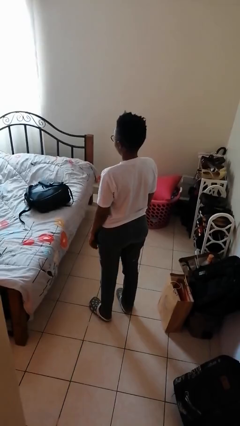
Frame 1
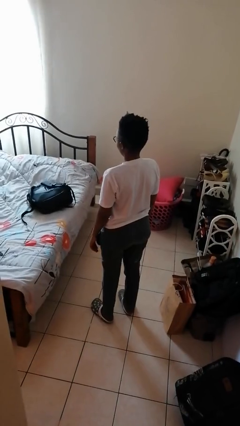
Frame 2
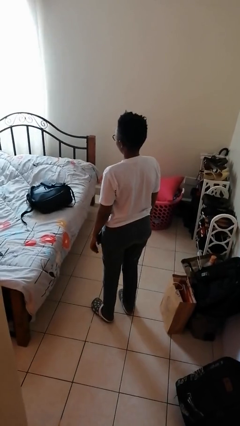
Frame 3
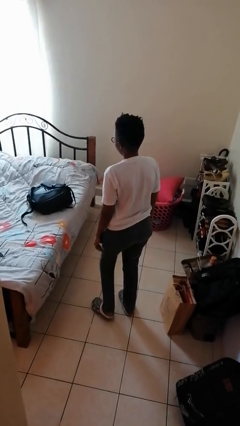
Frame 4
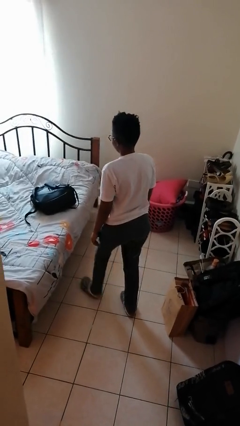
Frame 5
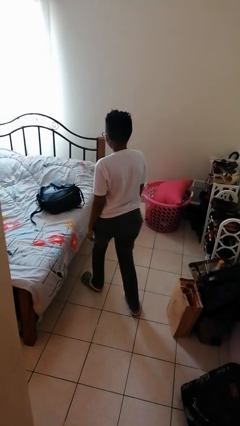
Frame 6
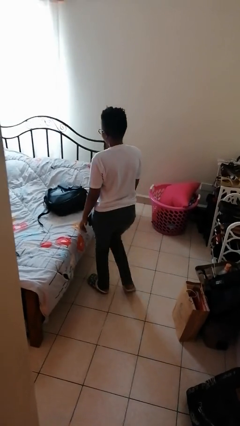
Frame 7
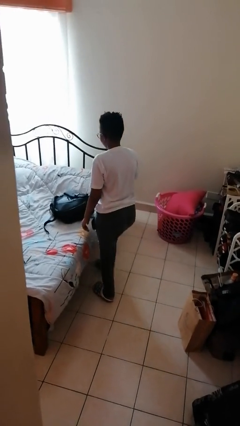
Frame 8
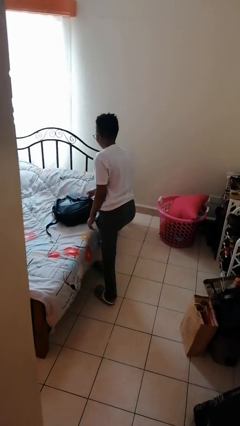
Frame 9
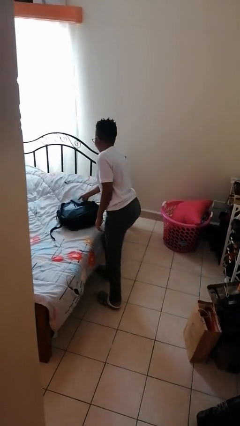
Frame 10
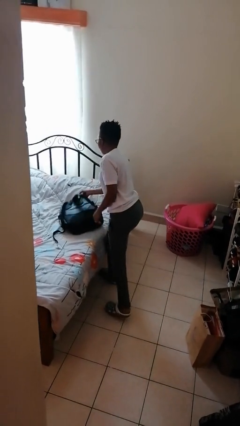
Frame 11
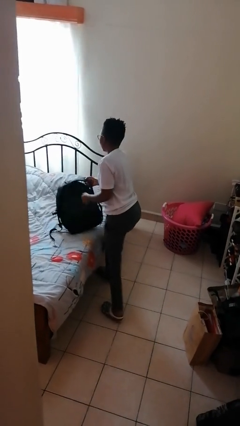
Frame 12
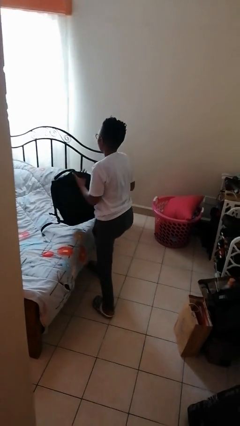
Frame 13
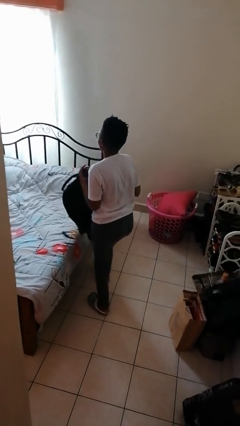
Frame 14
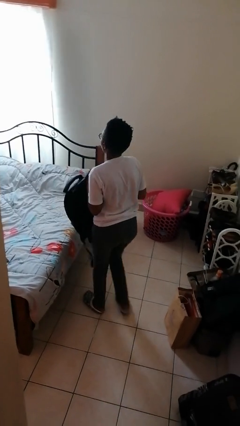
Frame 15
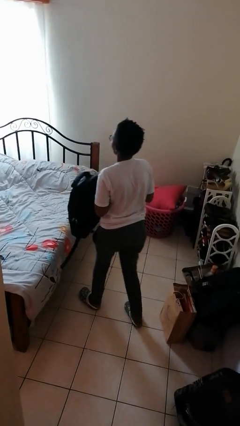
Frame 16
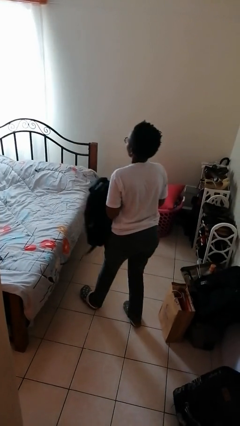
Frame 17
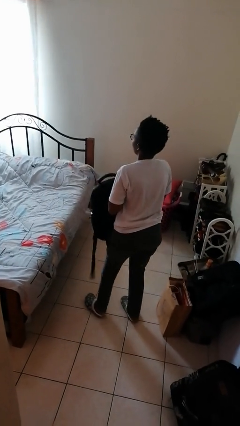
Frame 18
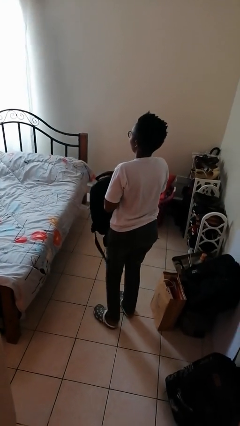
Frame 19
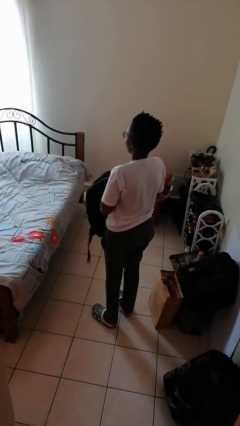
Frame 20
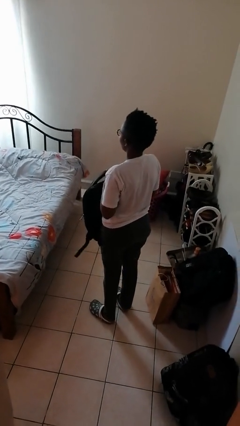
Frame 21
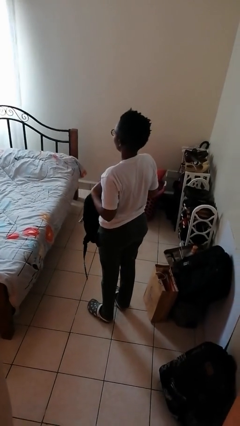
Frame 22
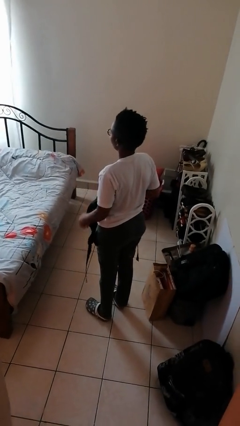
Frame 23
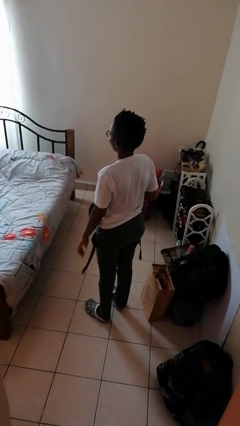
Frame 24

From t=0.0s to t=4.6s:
person picks up object from bed

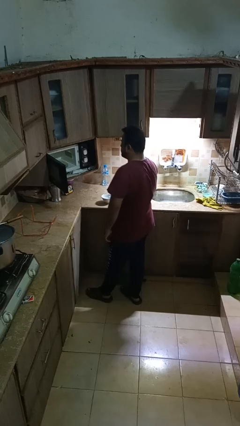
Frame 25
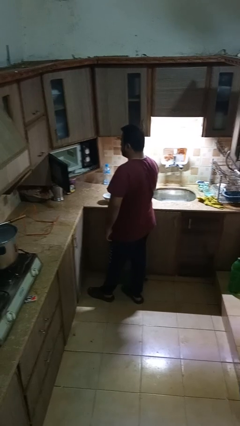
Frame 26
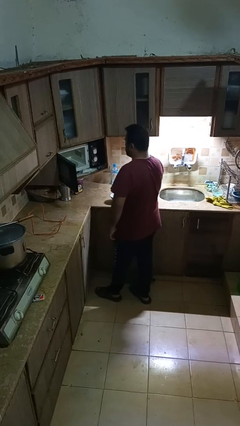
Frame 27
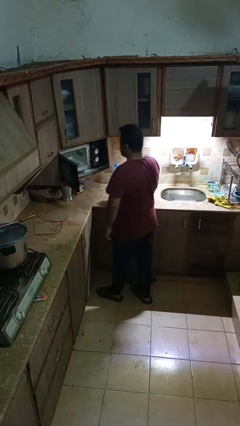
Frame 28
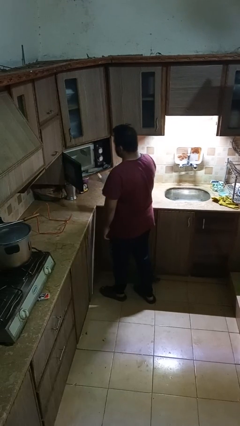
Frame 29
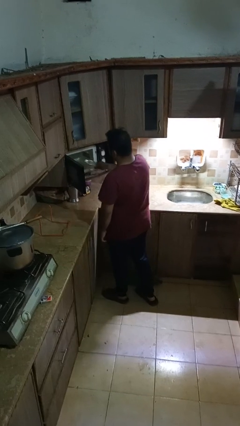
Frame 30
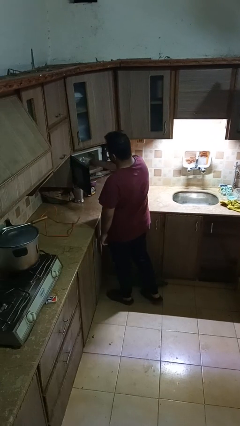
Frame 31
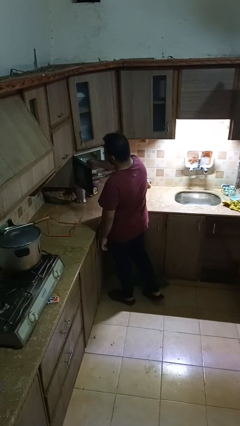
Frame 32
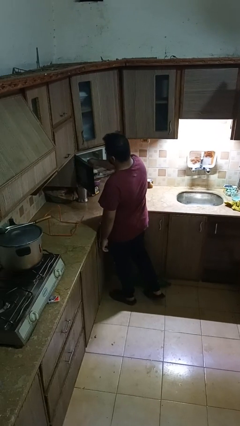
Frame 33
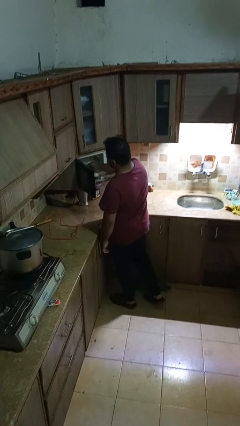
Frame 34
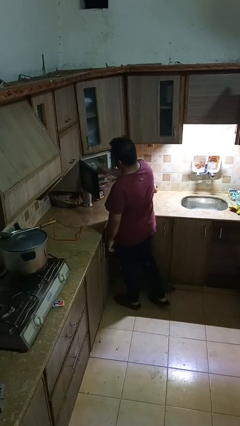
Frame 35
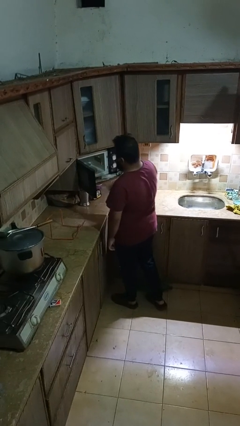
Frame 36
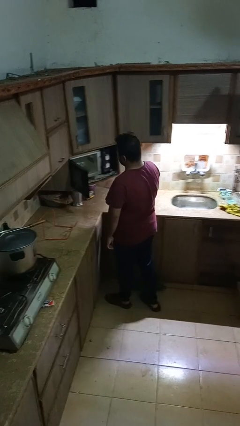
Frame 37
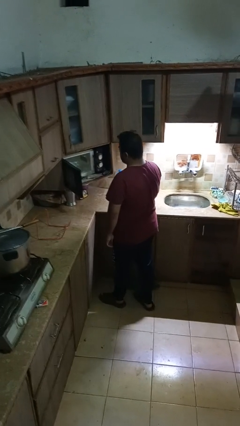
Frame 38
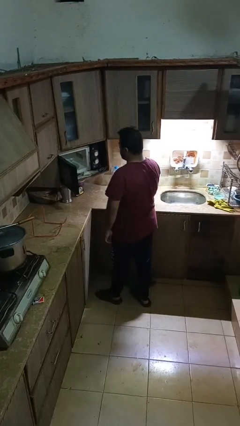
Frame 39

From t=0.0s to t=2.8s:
person puts object into microwave

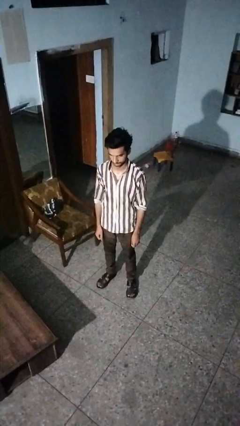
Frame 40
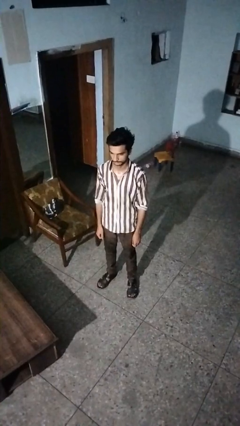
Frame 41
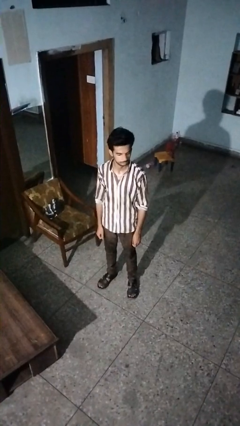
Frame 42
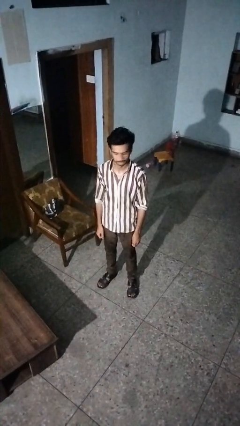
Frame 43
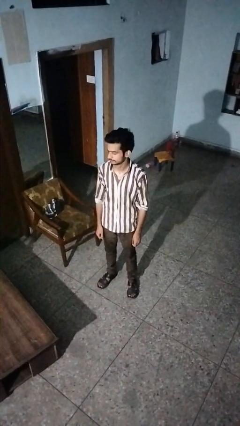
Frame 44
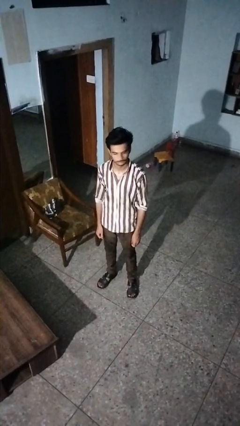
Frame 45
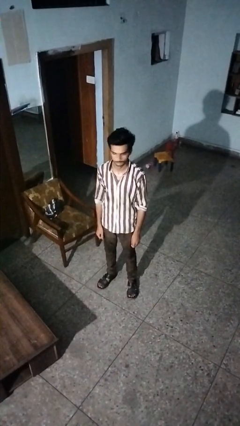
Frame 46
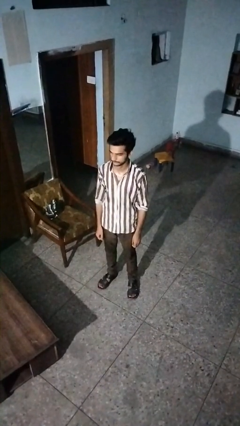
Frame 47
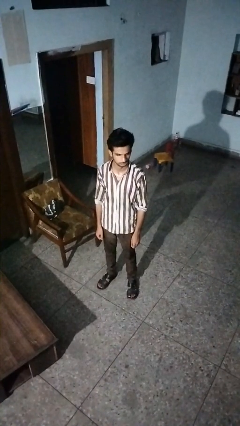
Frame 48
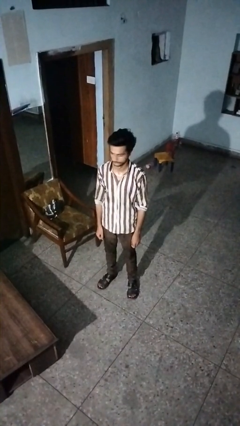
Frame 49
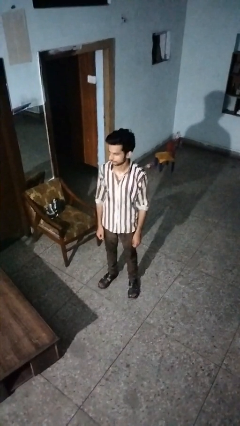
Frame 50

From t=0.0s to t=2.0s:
person shakes head

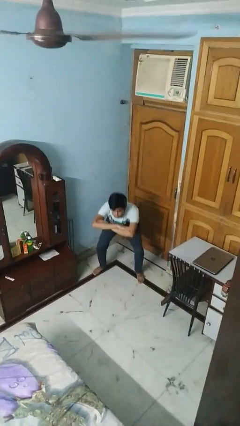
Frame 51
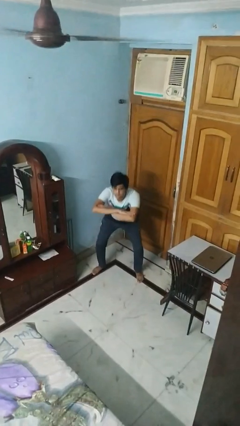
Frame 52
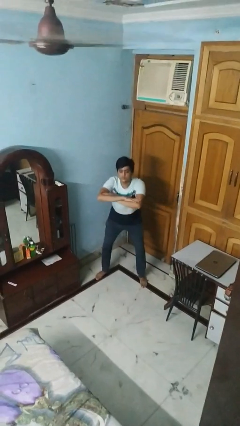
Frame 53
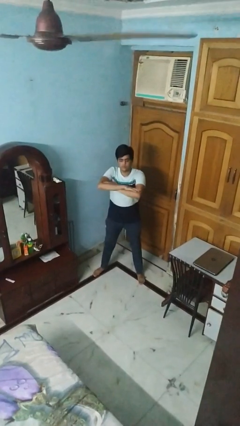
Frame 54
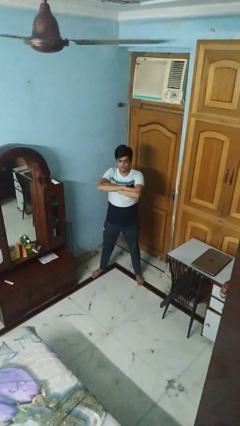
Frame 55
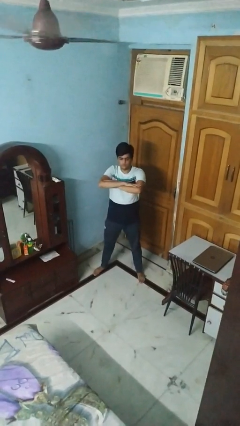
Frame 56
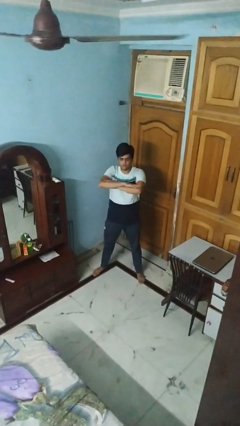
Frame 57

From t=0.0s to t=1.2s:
person stands up

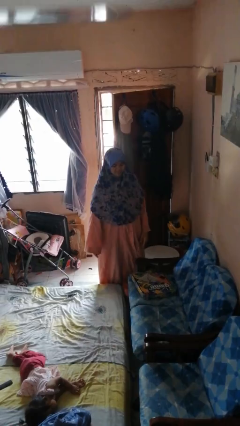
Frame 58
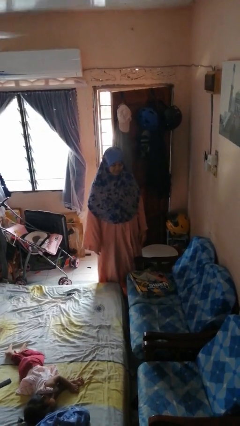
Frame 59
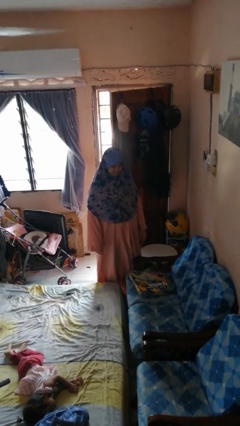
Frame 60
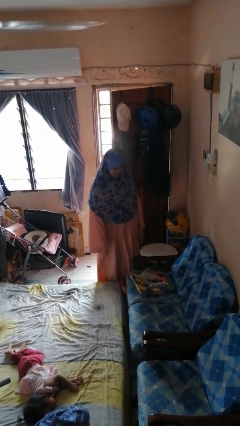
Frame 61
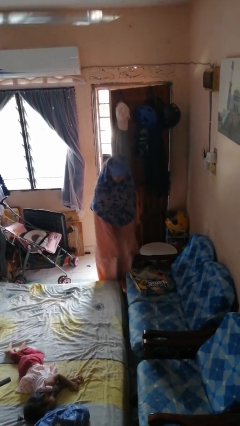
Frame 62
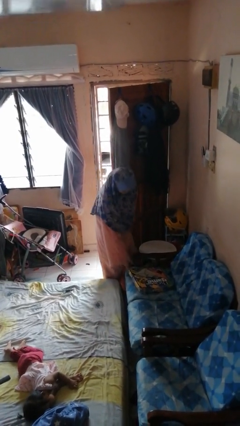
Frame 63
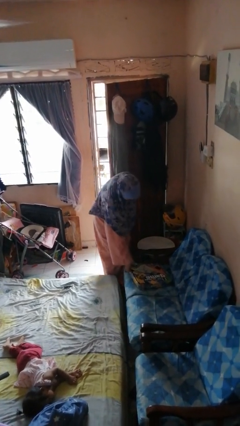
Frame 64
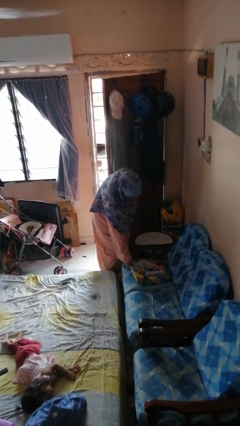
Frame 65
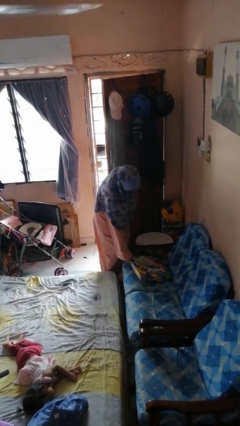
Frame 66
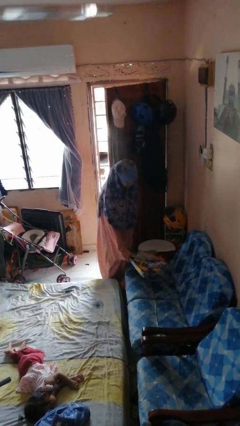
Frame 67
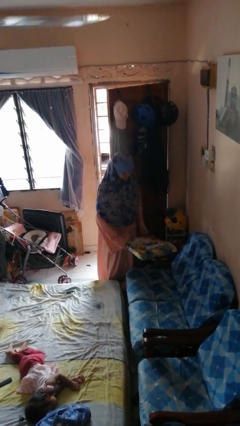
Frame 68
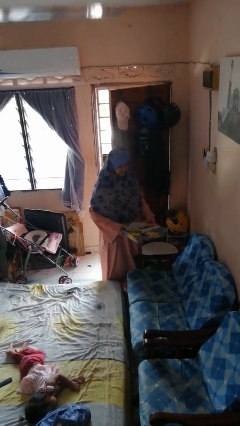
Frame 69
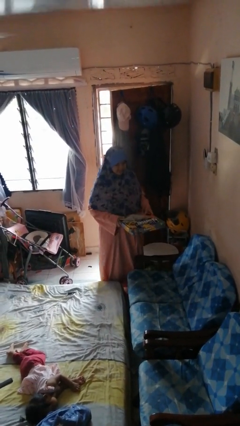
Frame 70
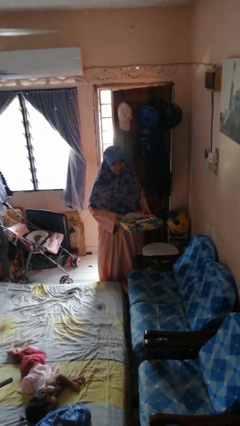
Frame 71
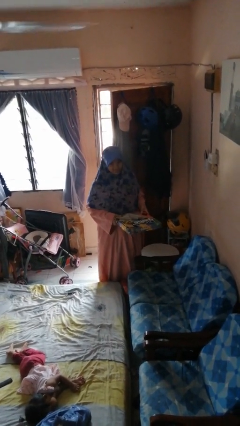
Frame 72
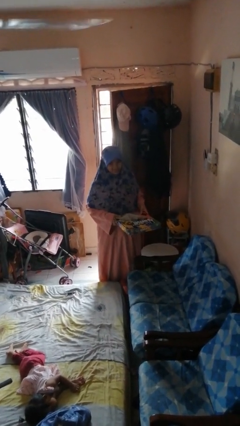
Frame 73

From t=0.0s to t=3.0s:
person picks up object from couch

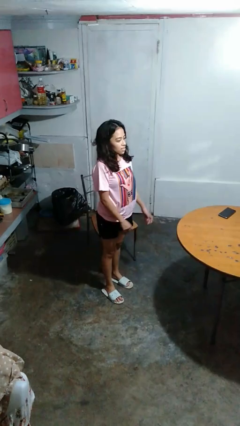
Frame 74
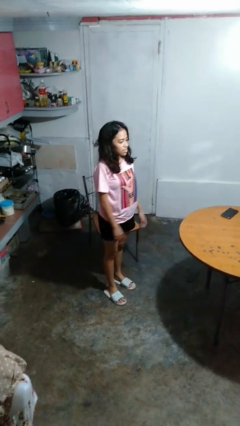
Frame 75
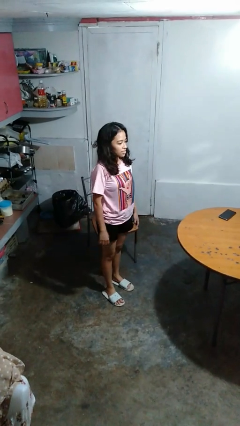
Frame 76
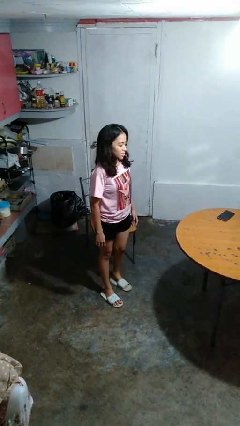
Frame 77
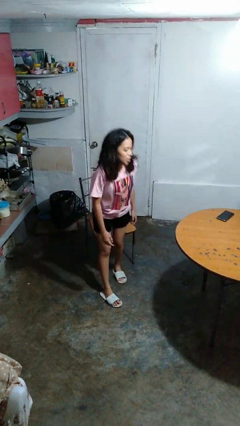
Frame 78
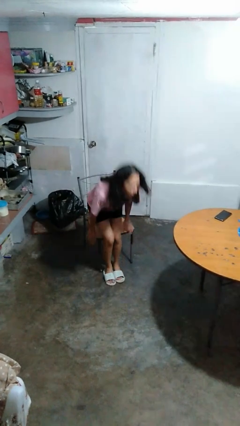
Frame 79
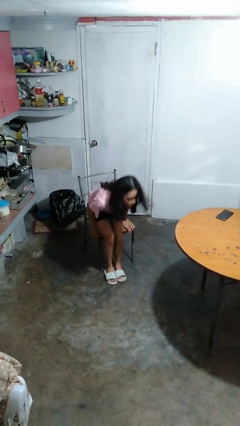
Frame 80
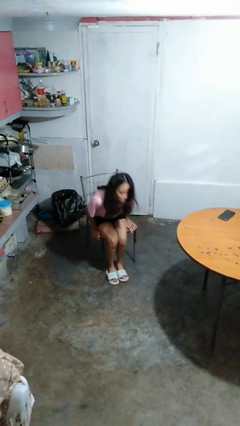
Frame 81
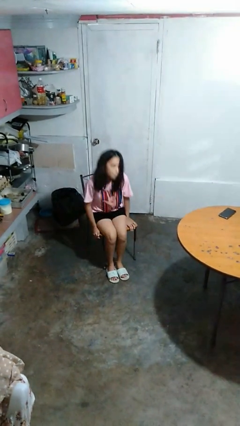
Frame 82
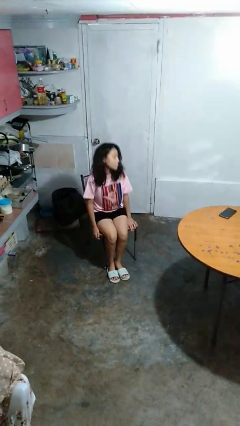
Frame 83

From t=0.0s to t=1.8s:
person sits down

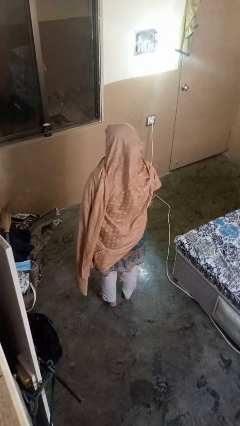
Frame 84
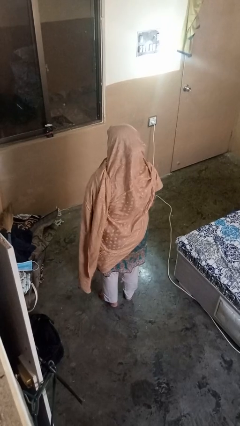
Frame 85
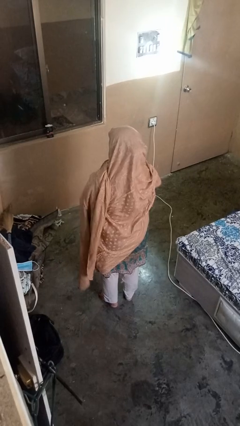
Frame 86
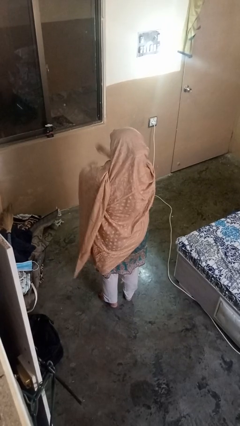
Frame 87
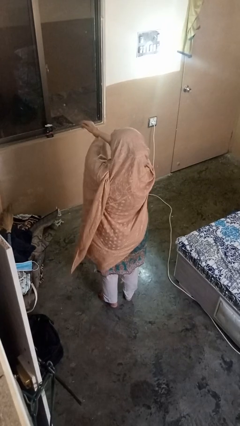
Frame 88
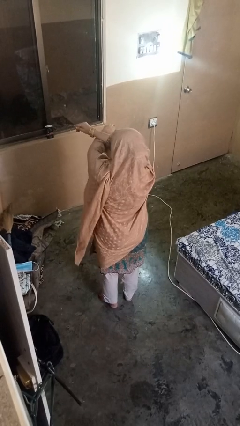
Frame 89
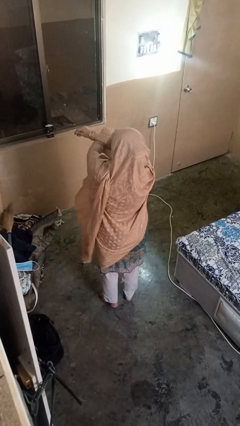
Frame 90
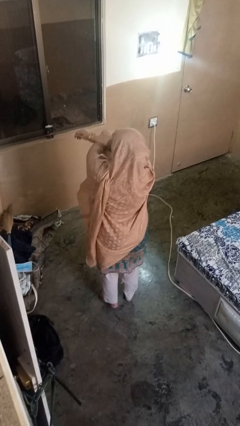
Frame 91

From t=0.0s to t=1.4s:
person crosses arms

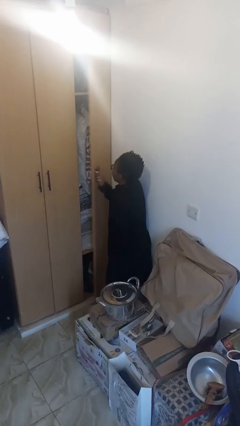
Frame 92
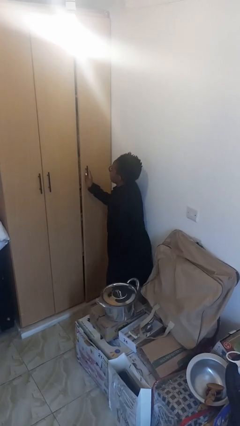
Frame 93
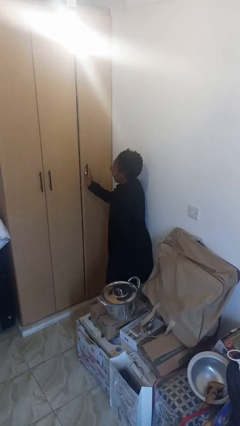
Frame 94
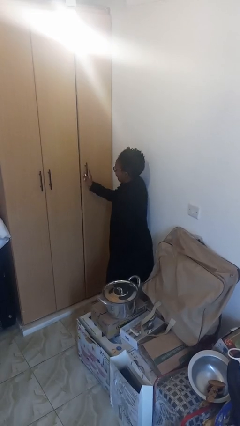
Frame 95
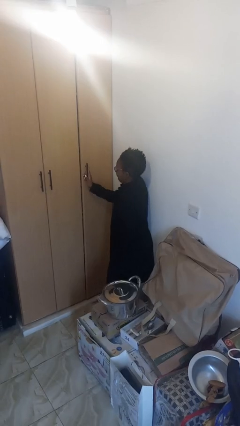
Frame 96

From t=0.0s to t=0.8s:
person closes closet door
